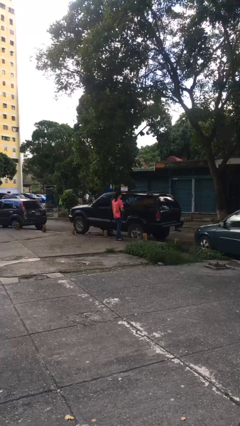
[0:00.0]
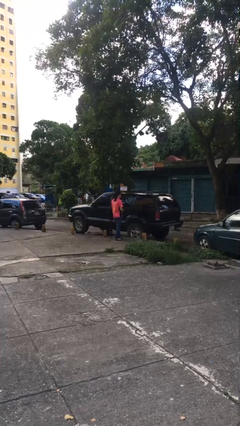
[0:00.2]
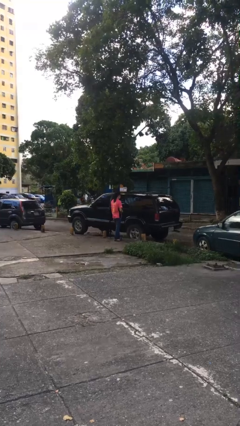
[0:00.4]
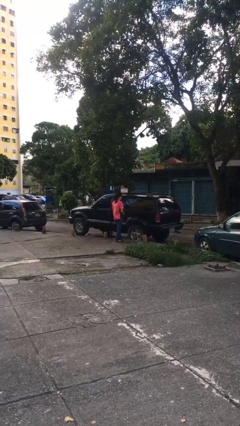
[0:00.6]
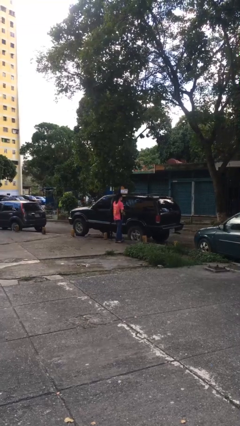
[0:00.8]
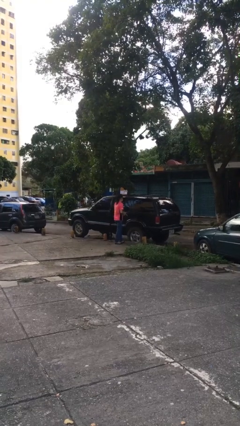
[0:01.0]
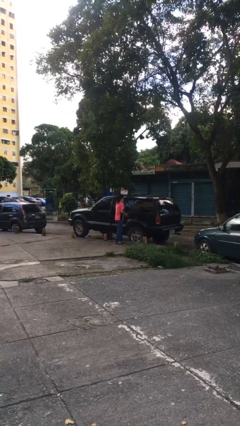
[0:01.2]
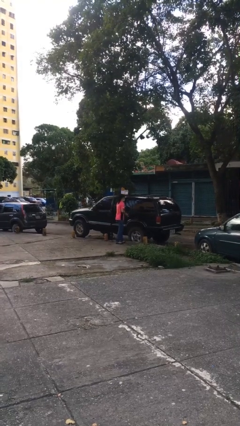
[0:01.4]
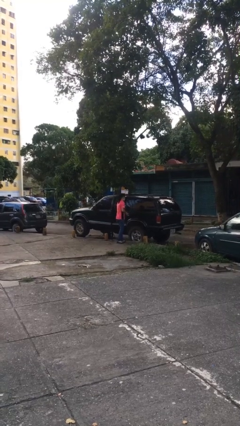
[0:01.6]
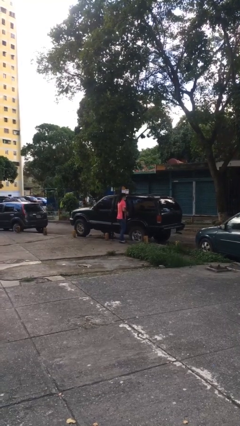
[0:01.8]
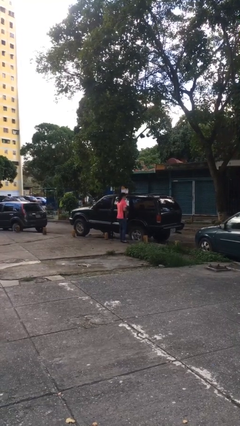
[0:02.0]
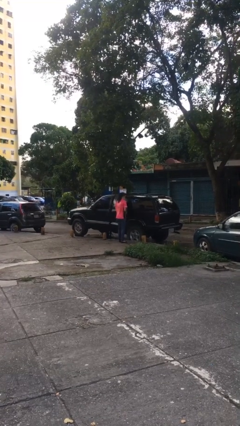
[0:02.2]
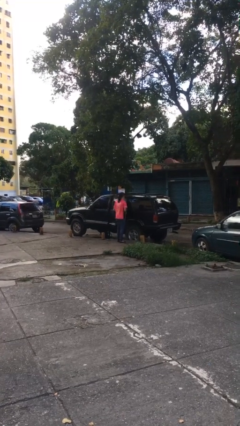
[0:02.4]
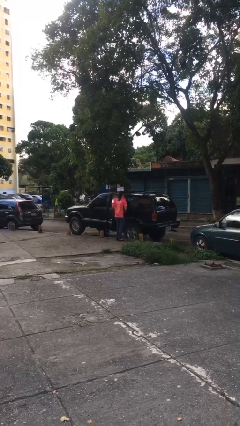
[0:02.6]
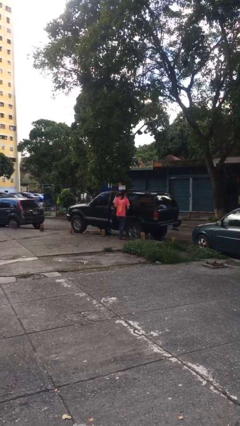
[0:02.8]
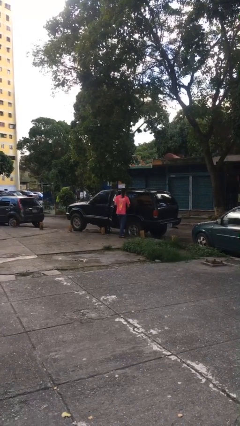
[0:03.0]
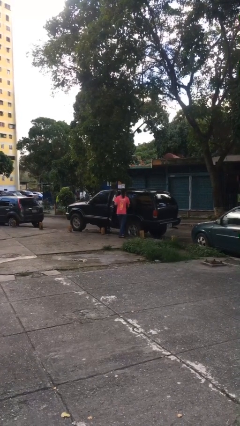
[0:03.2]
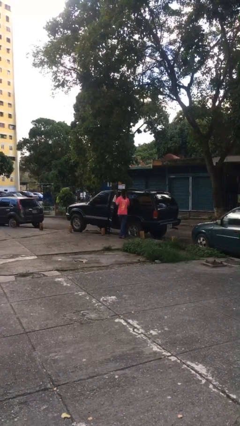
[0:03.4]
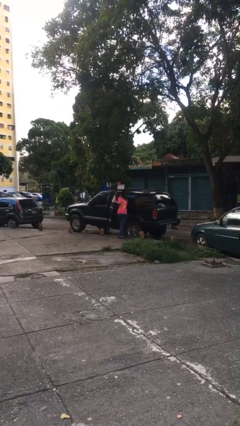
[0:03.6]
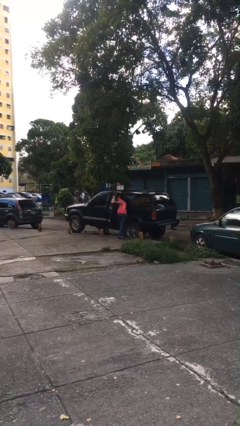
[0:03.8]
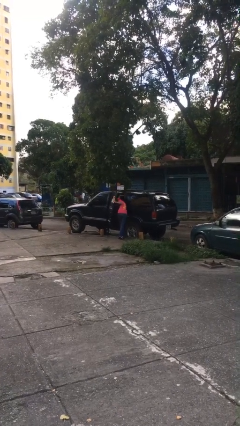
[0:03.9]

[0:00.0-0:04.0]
person opens car door

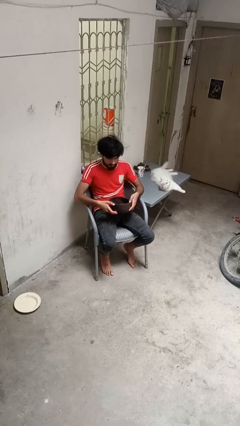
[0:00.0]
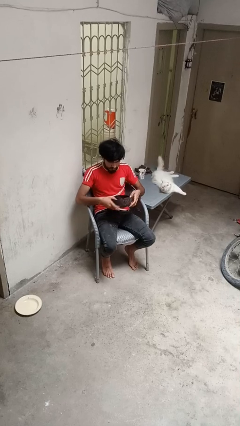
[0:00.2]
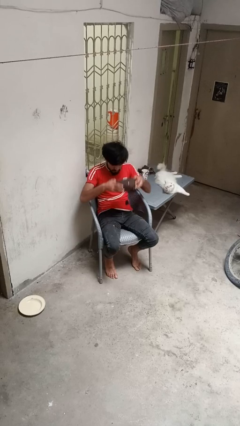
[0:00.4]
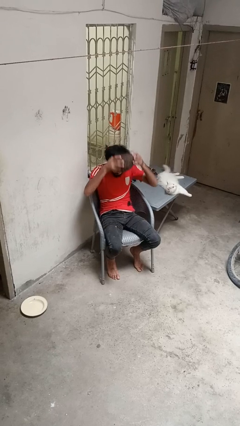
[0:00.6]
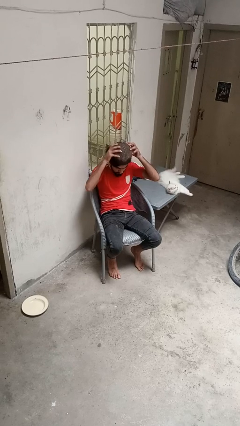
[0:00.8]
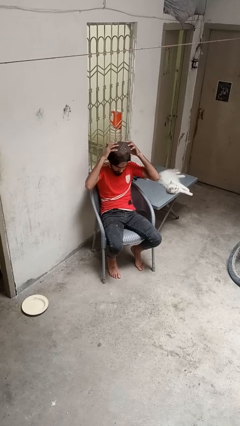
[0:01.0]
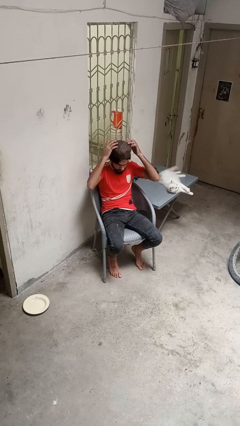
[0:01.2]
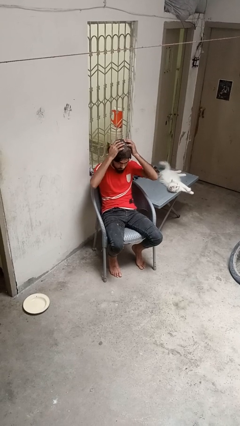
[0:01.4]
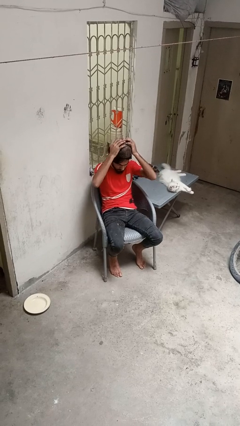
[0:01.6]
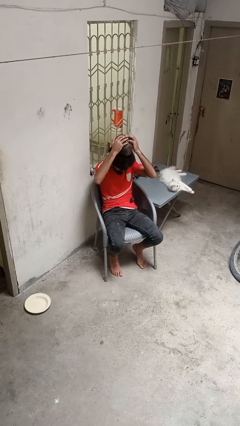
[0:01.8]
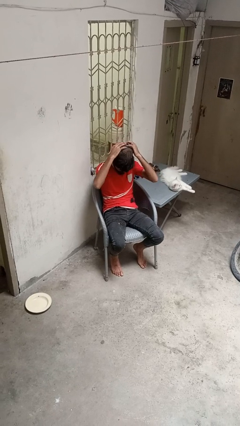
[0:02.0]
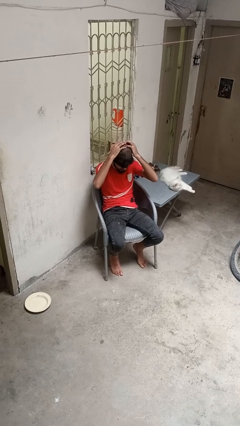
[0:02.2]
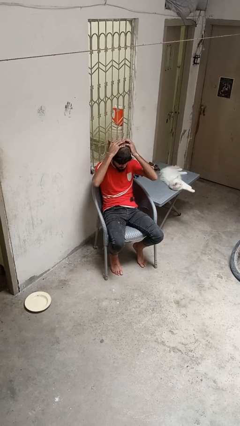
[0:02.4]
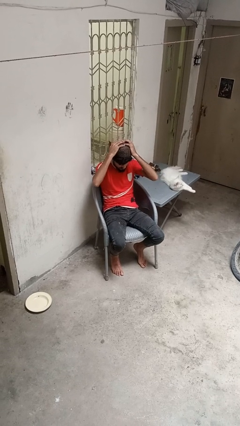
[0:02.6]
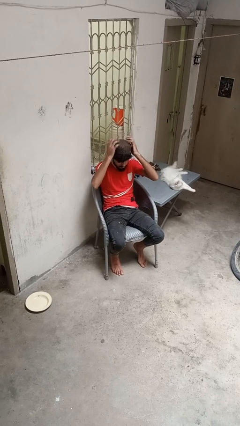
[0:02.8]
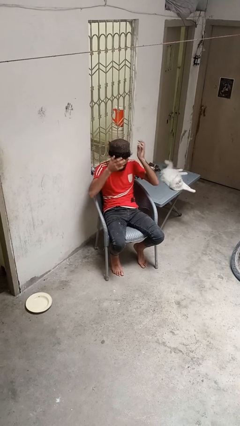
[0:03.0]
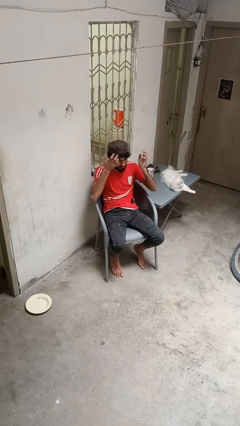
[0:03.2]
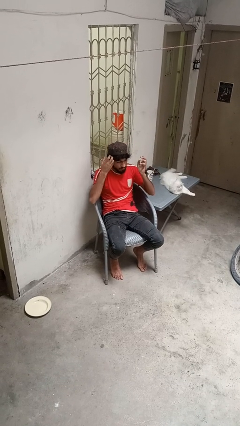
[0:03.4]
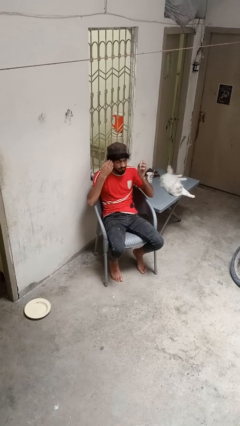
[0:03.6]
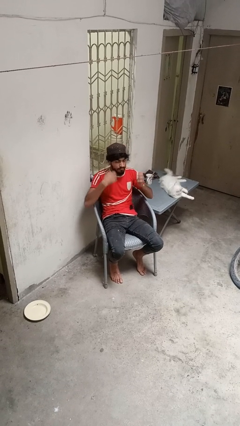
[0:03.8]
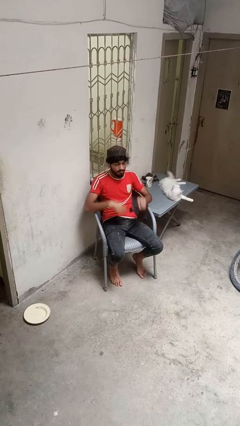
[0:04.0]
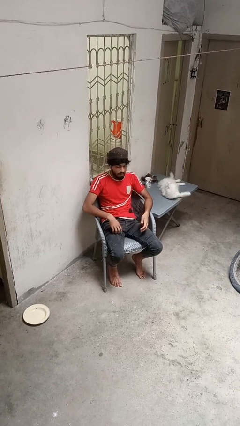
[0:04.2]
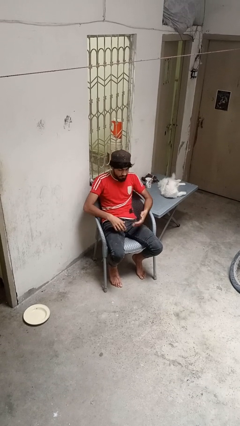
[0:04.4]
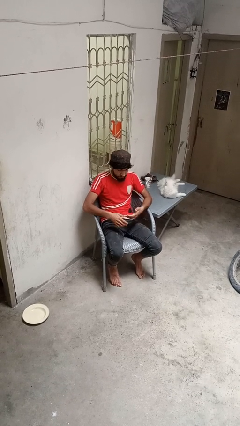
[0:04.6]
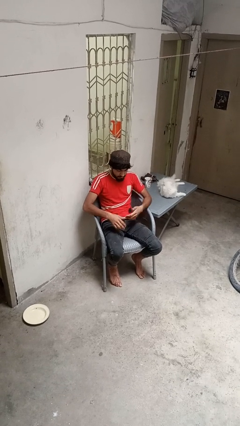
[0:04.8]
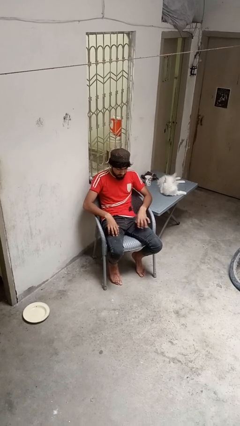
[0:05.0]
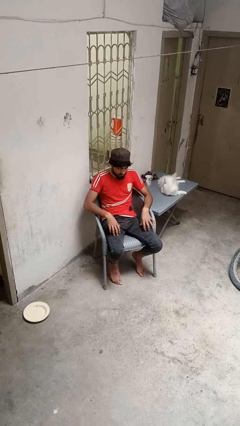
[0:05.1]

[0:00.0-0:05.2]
person puts on hat

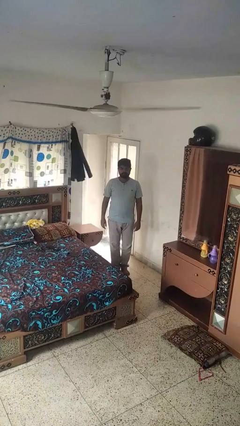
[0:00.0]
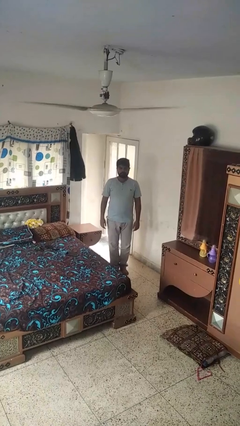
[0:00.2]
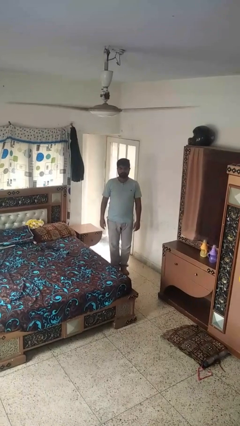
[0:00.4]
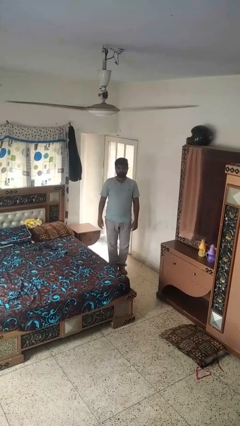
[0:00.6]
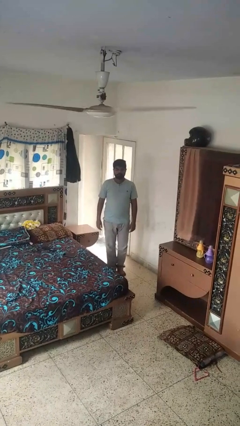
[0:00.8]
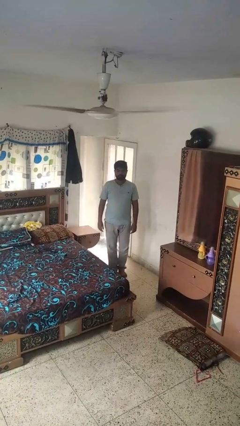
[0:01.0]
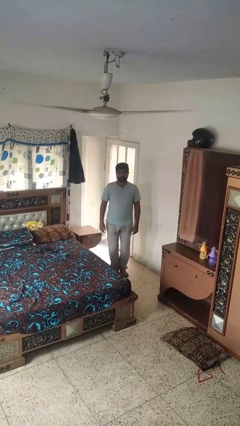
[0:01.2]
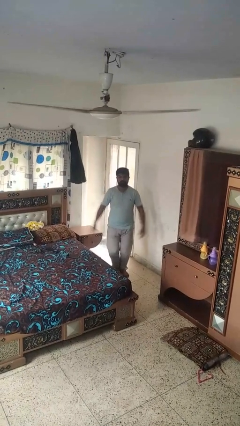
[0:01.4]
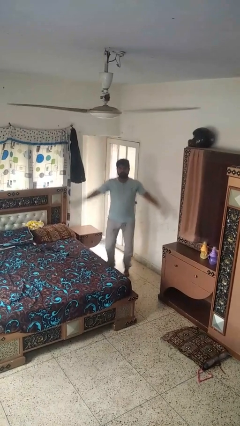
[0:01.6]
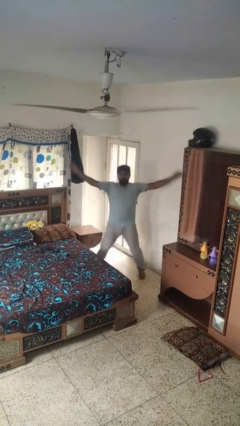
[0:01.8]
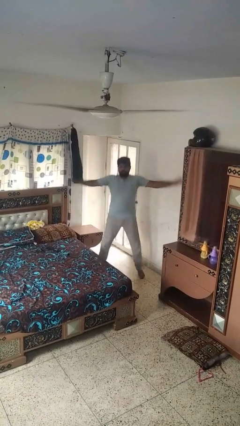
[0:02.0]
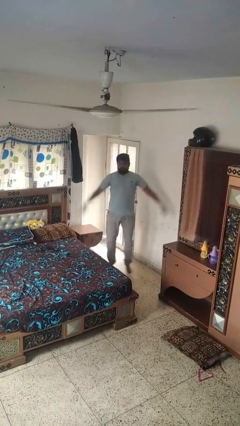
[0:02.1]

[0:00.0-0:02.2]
person exercises with jumping jacks

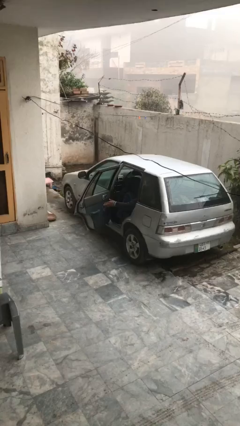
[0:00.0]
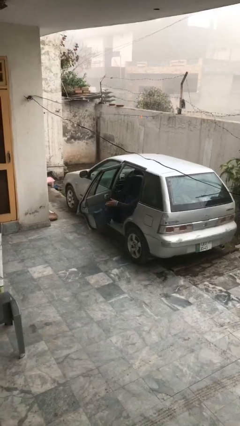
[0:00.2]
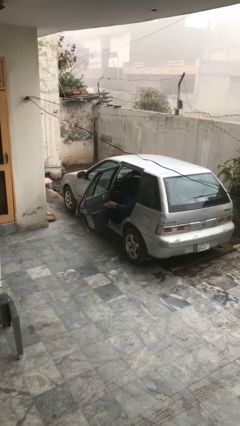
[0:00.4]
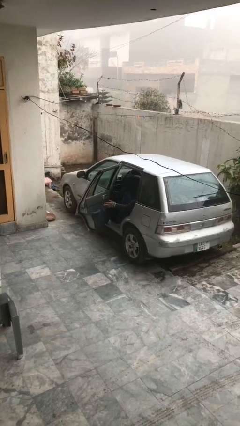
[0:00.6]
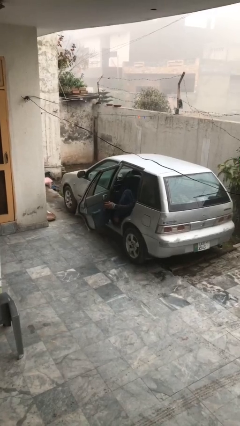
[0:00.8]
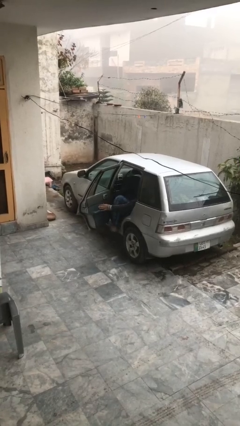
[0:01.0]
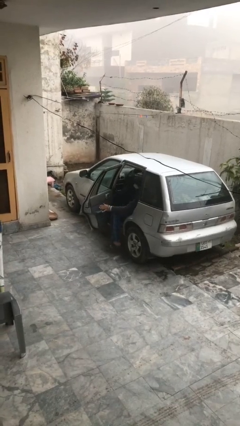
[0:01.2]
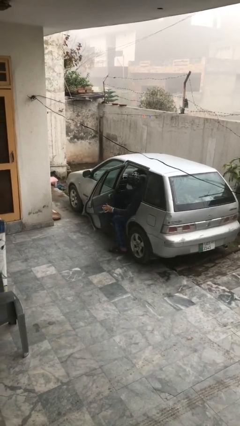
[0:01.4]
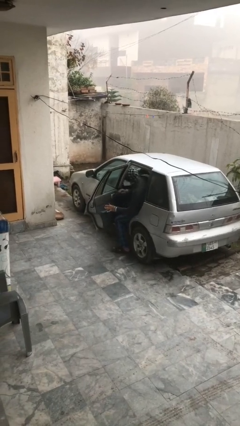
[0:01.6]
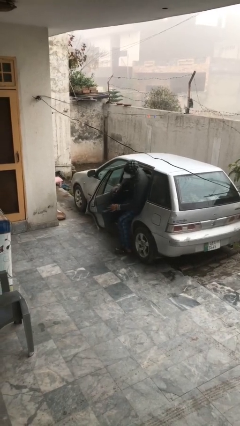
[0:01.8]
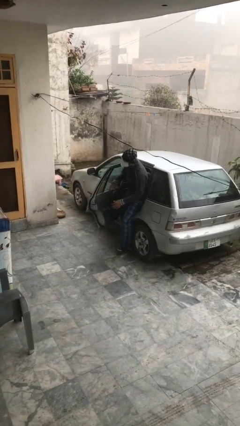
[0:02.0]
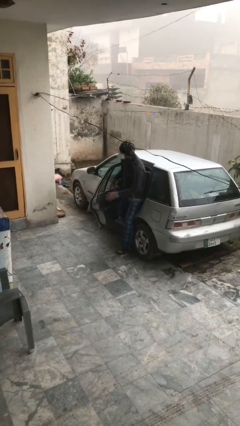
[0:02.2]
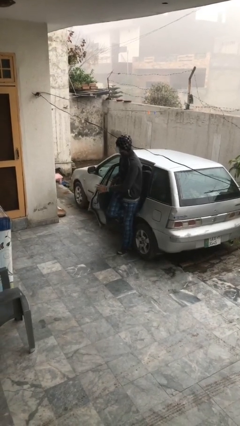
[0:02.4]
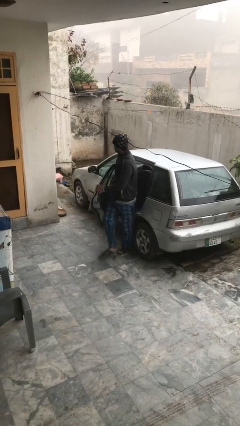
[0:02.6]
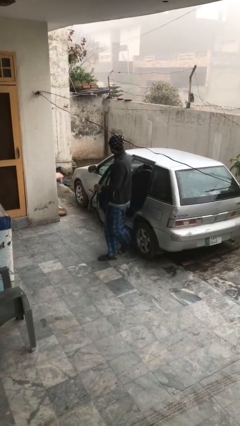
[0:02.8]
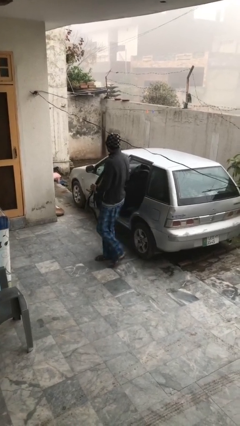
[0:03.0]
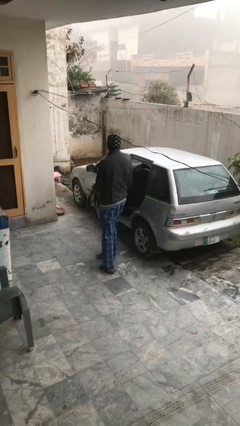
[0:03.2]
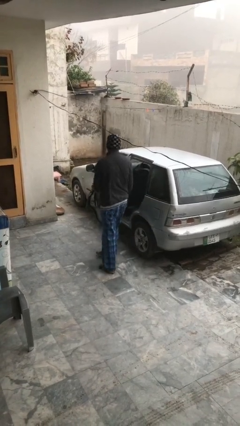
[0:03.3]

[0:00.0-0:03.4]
person exits car

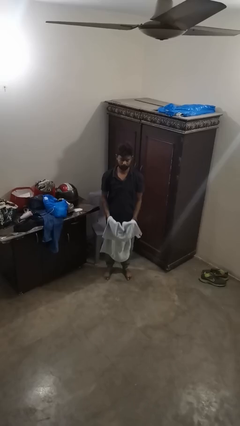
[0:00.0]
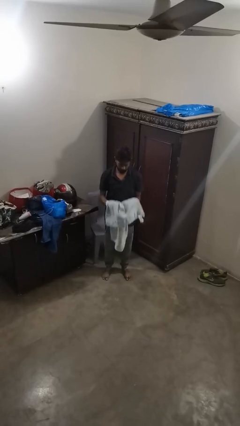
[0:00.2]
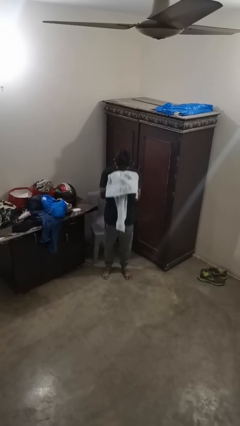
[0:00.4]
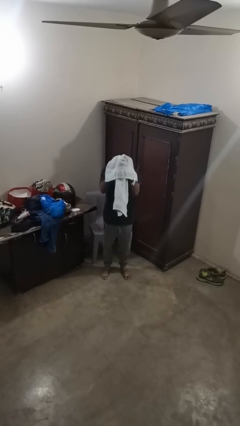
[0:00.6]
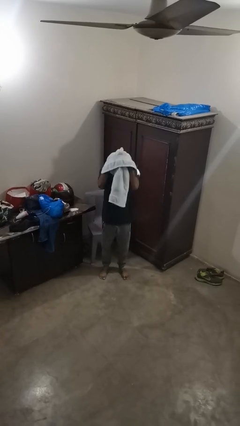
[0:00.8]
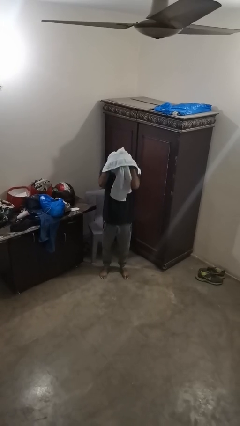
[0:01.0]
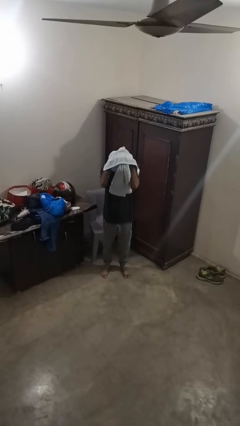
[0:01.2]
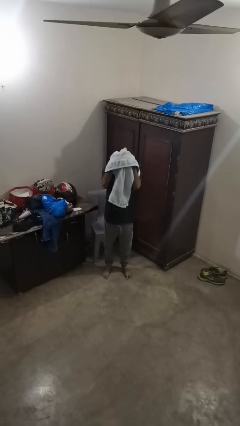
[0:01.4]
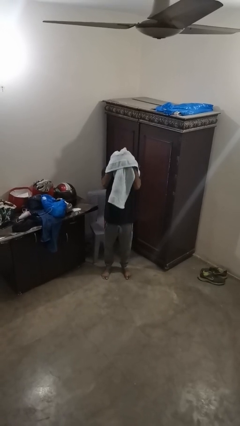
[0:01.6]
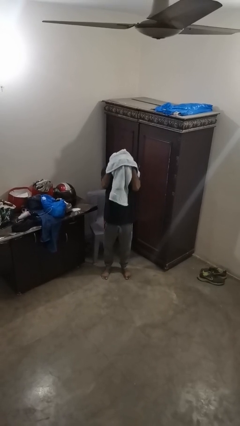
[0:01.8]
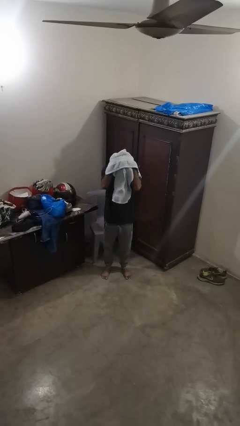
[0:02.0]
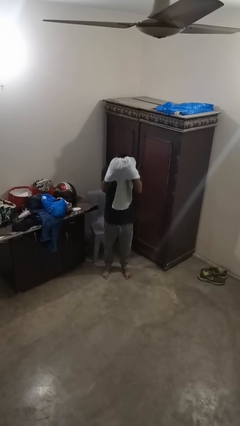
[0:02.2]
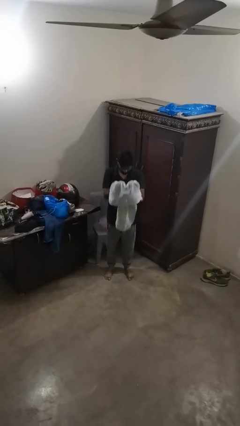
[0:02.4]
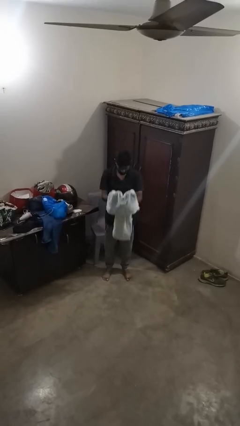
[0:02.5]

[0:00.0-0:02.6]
person dries hair with towel

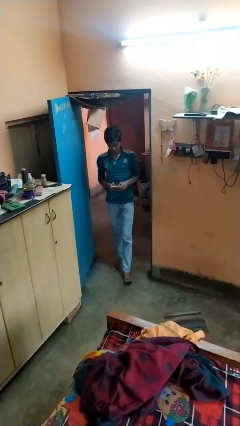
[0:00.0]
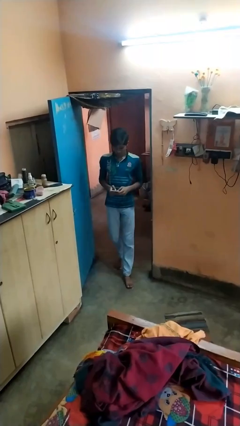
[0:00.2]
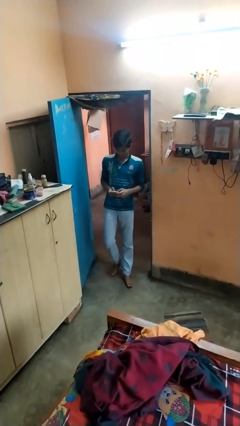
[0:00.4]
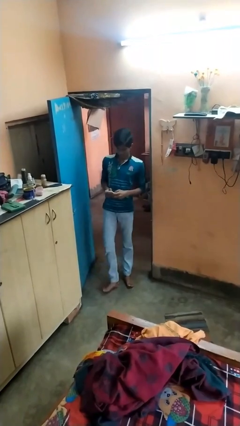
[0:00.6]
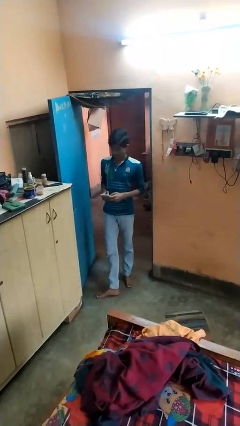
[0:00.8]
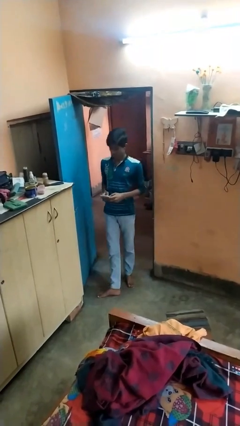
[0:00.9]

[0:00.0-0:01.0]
person enters scene through structure
